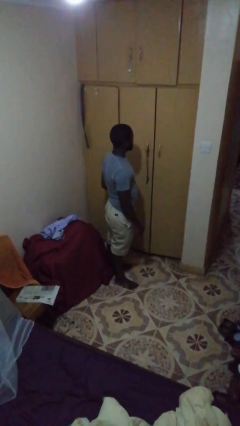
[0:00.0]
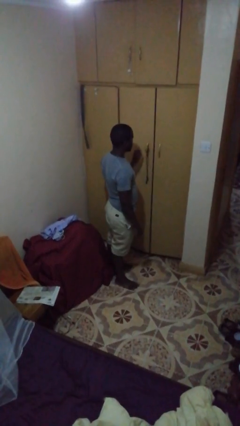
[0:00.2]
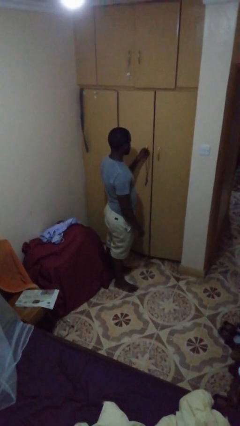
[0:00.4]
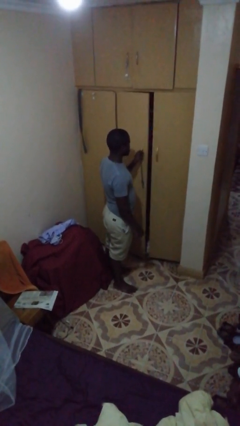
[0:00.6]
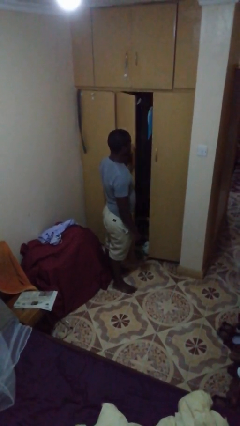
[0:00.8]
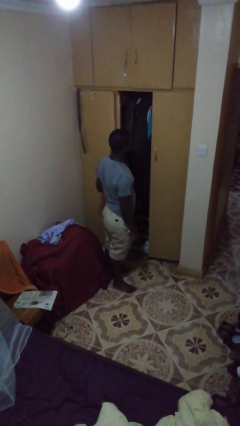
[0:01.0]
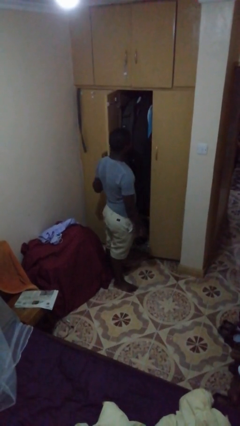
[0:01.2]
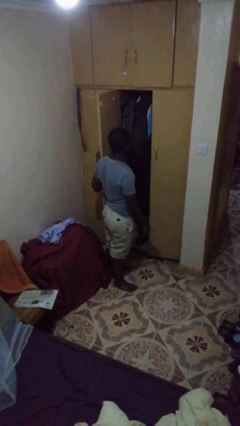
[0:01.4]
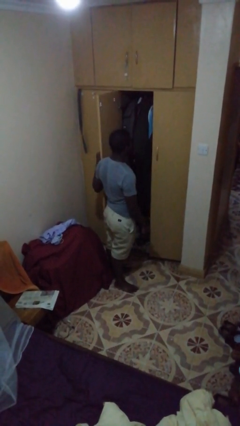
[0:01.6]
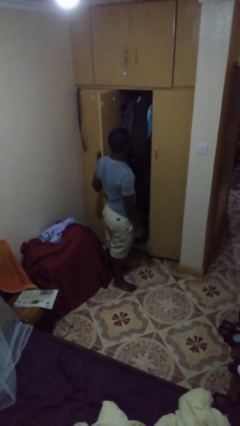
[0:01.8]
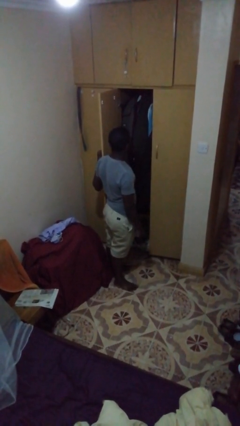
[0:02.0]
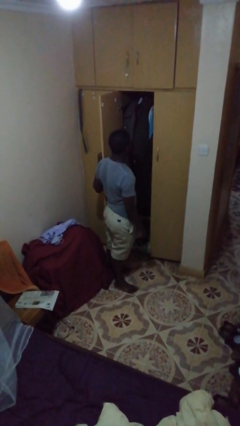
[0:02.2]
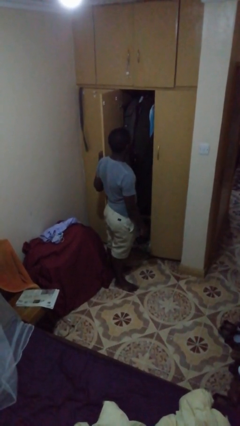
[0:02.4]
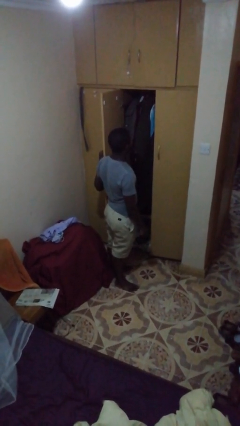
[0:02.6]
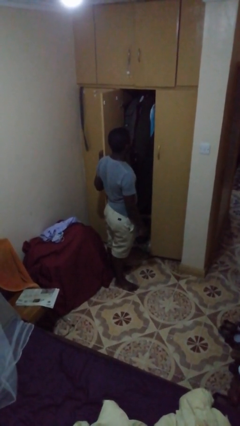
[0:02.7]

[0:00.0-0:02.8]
person opens closet door

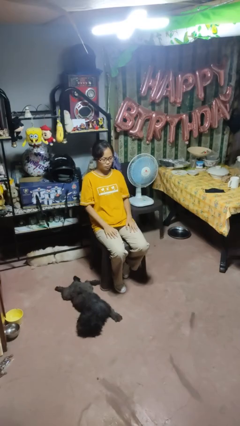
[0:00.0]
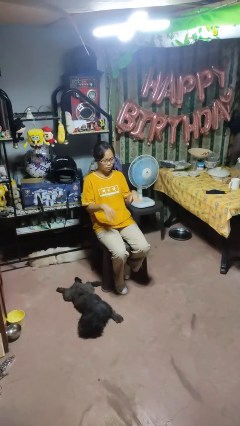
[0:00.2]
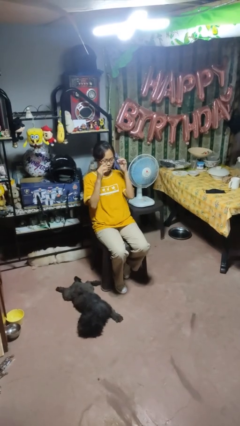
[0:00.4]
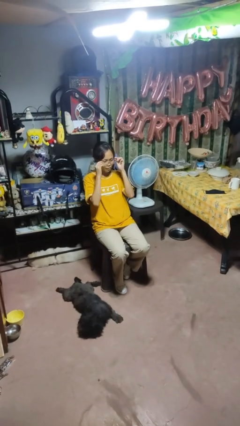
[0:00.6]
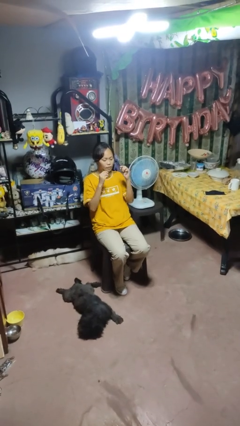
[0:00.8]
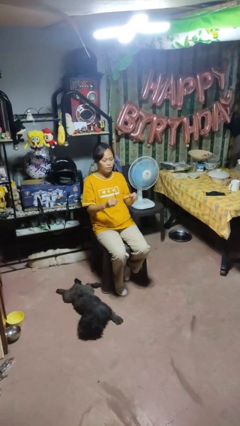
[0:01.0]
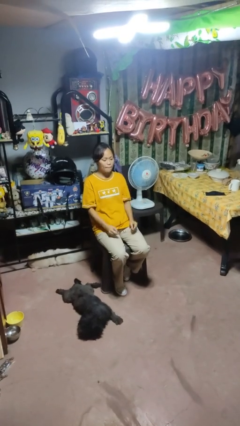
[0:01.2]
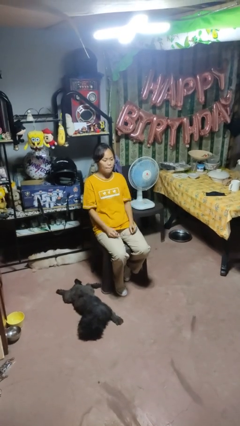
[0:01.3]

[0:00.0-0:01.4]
person takes off glasses

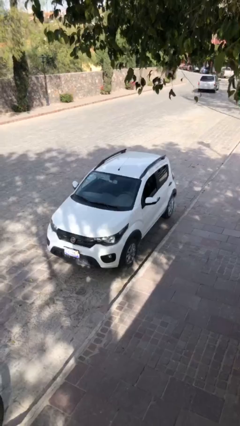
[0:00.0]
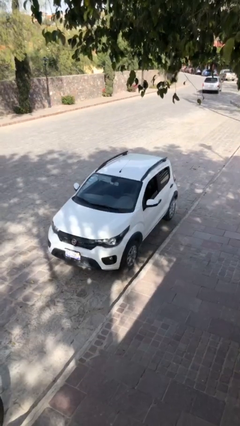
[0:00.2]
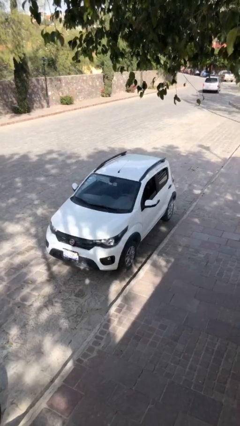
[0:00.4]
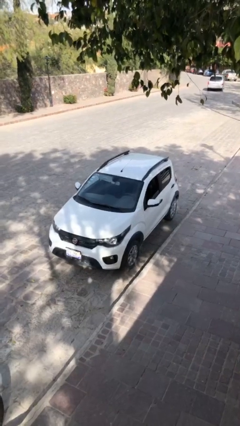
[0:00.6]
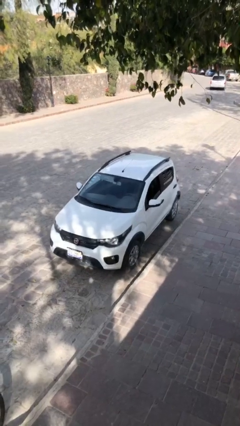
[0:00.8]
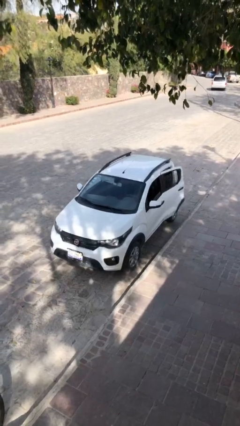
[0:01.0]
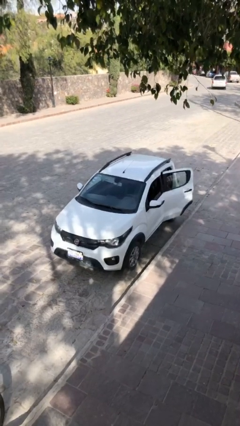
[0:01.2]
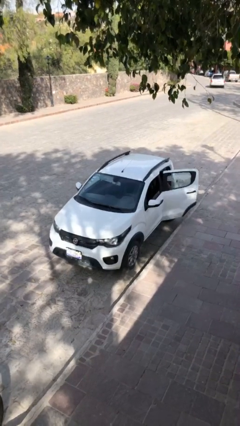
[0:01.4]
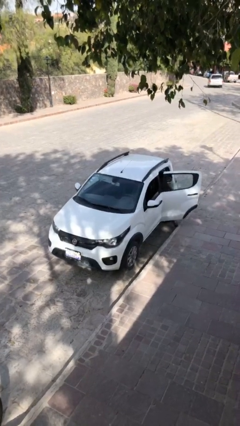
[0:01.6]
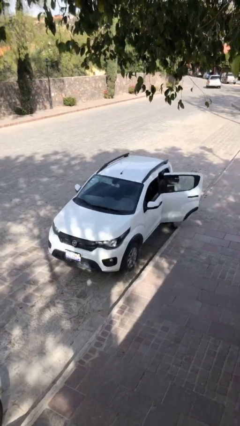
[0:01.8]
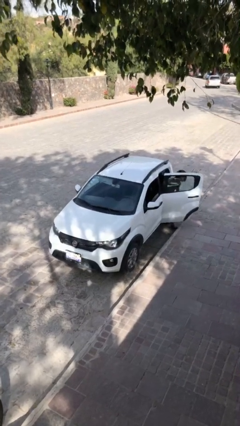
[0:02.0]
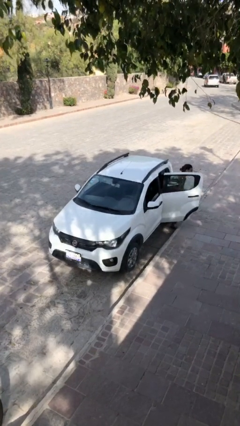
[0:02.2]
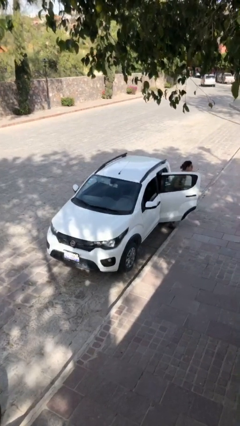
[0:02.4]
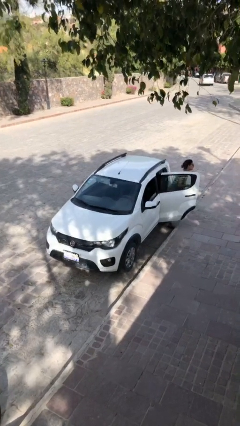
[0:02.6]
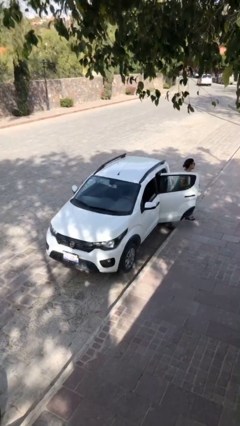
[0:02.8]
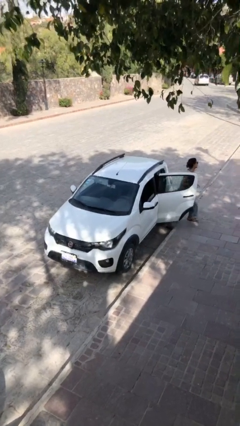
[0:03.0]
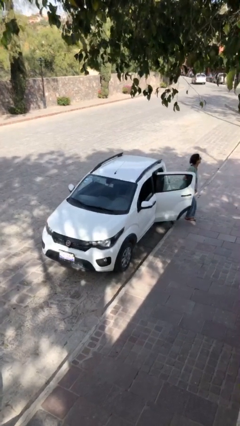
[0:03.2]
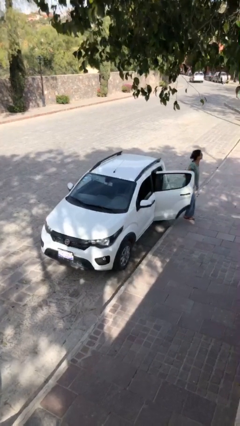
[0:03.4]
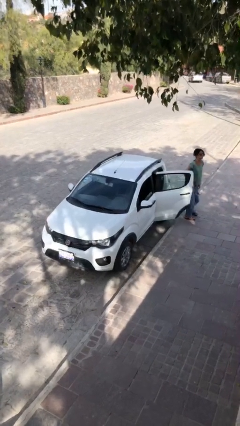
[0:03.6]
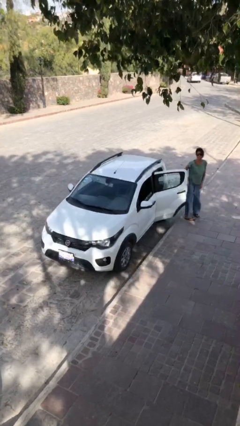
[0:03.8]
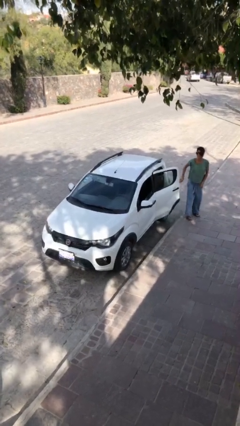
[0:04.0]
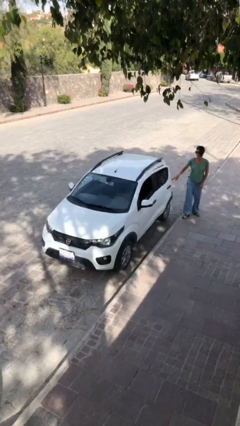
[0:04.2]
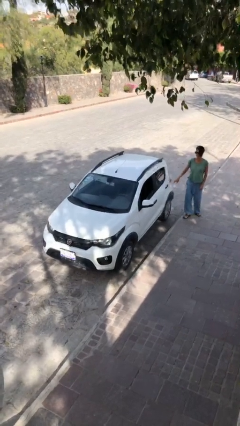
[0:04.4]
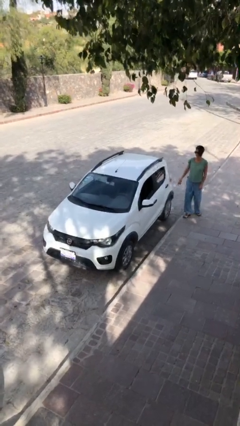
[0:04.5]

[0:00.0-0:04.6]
car drops off person

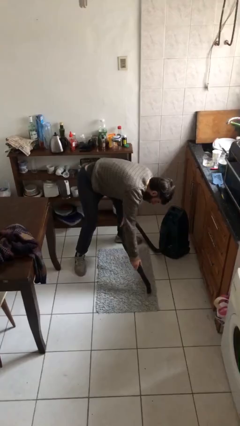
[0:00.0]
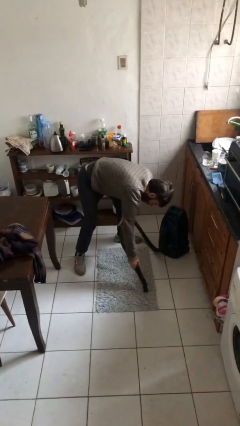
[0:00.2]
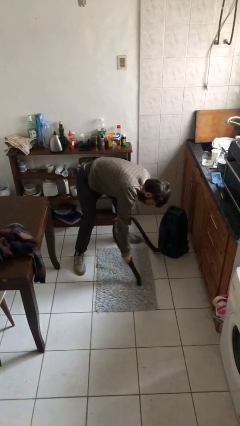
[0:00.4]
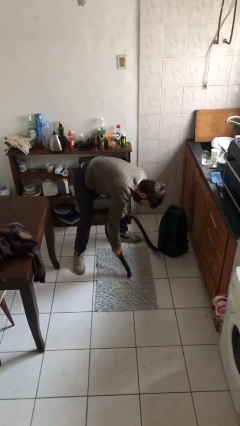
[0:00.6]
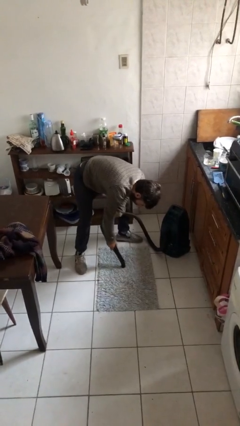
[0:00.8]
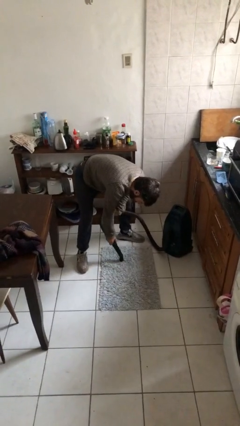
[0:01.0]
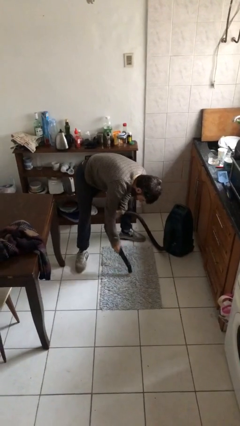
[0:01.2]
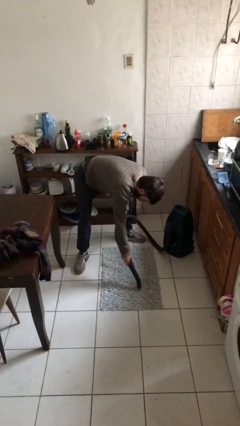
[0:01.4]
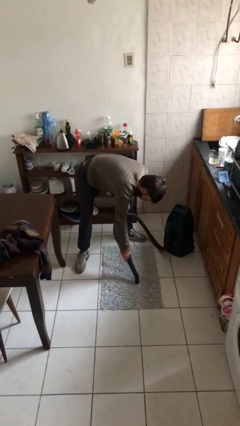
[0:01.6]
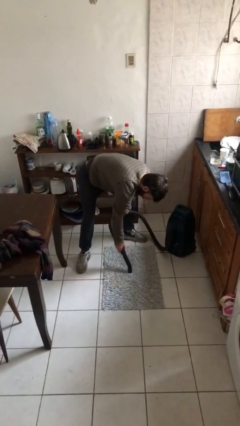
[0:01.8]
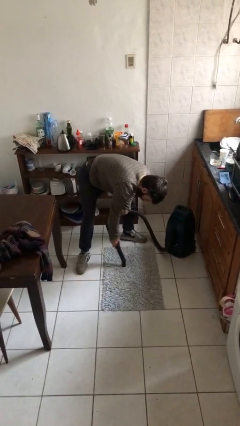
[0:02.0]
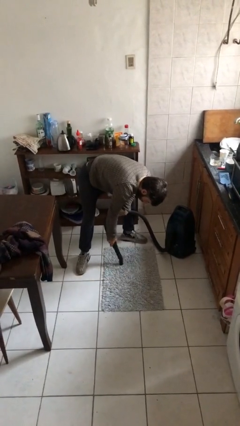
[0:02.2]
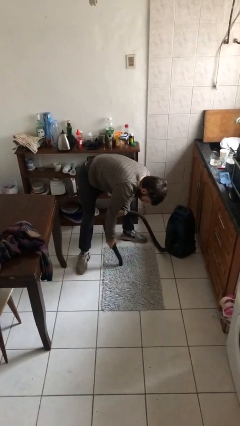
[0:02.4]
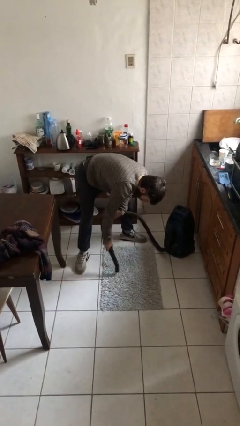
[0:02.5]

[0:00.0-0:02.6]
person vacuums carpet

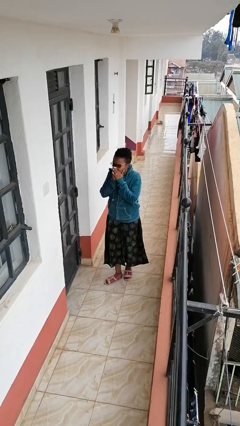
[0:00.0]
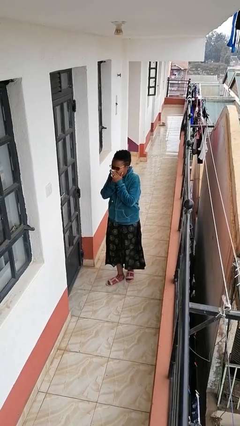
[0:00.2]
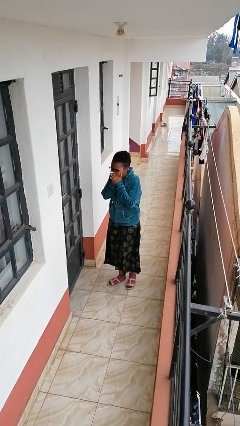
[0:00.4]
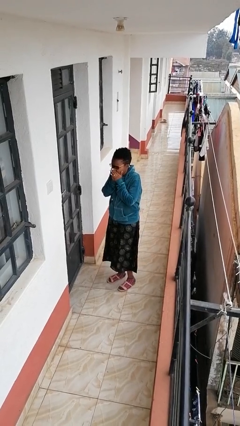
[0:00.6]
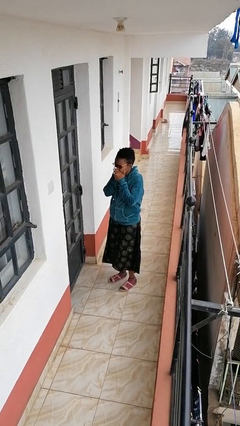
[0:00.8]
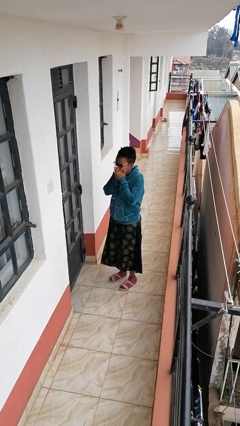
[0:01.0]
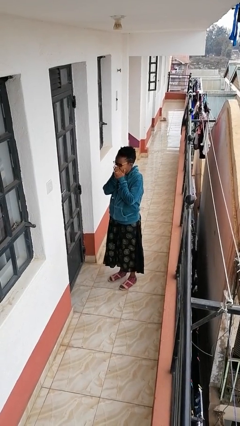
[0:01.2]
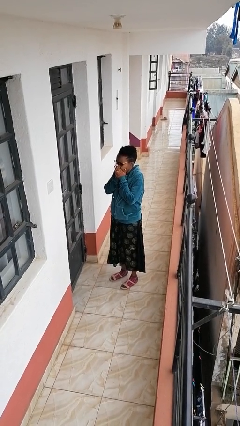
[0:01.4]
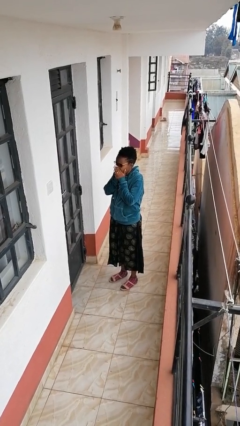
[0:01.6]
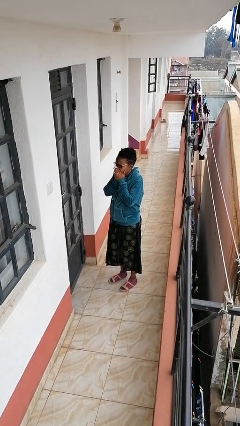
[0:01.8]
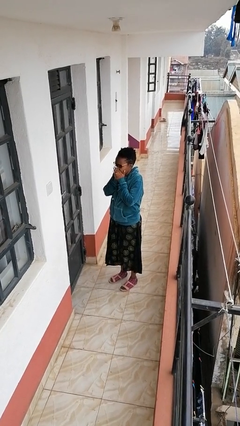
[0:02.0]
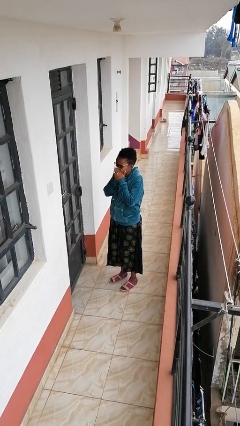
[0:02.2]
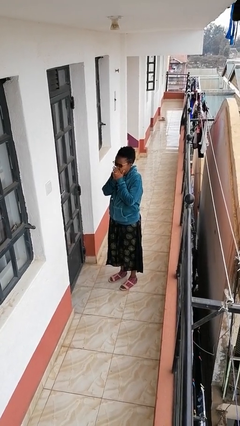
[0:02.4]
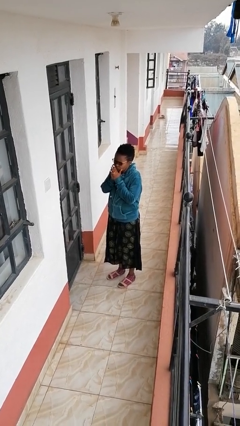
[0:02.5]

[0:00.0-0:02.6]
person blows into hands

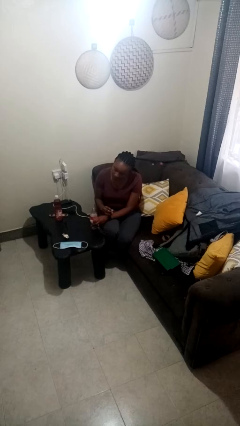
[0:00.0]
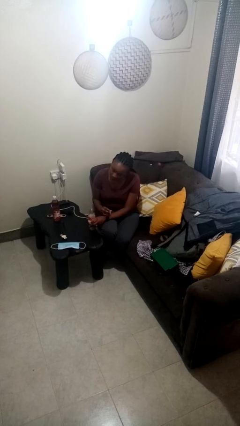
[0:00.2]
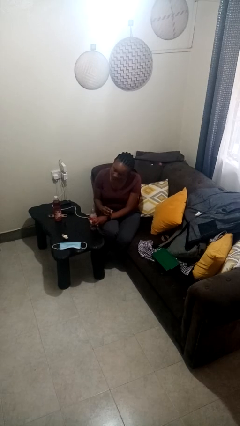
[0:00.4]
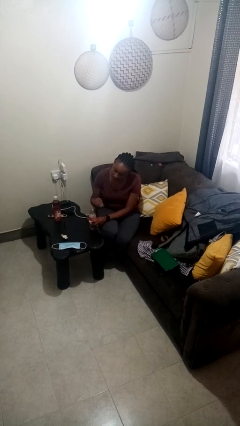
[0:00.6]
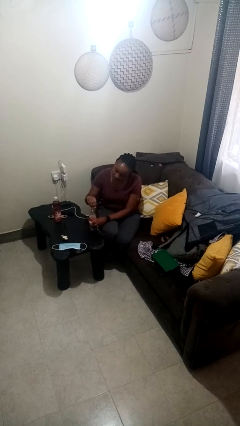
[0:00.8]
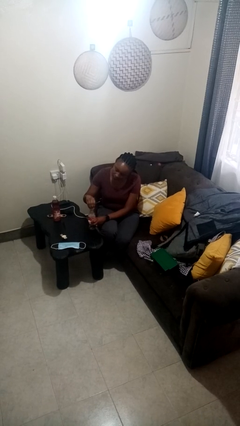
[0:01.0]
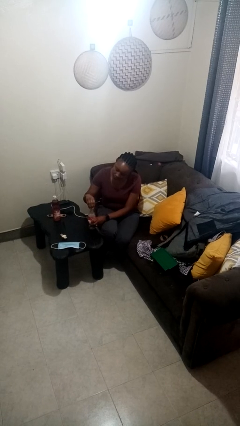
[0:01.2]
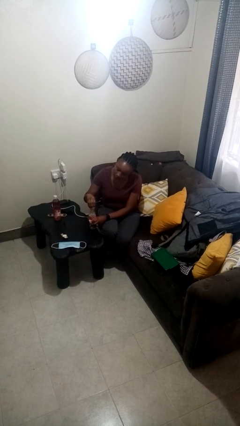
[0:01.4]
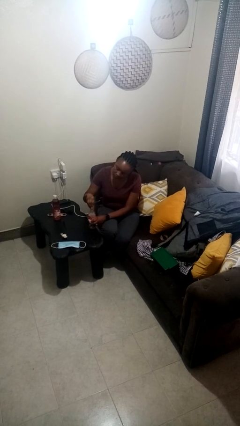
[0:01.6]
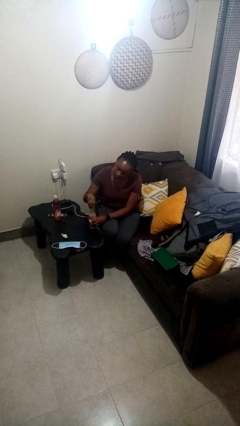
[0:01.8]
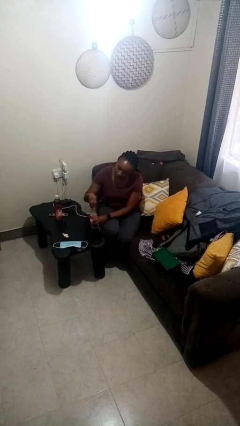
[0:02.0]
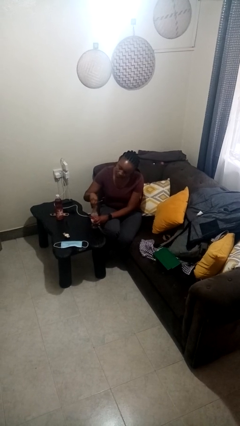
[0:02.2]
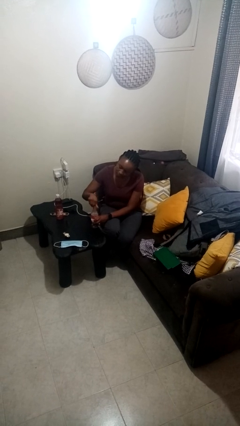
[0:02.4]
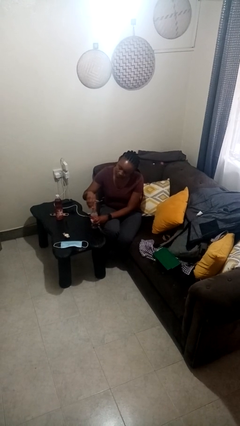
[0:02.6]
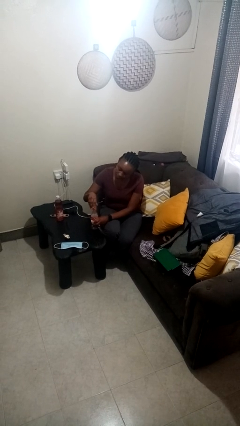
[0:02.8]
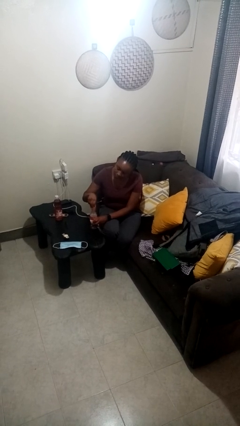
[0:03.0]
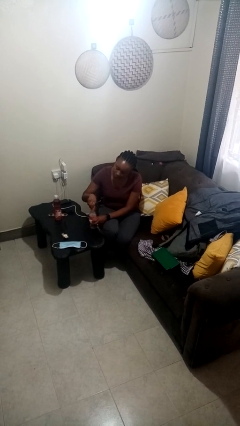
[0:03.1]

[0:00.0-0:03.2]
person screws lid to bottle
